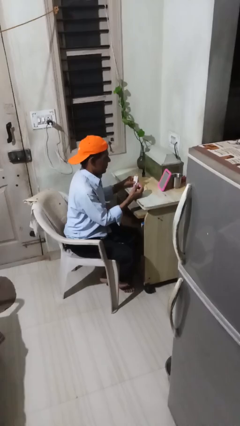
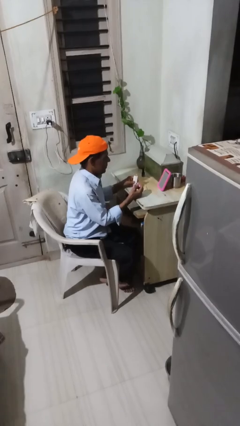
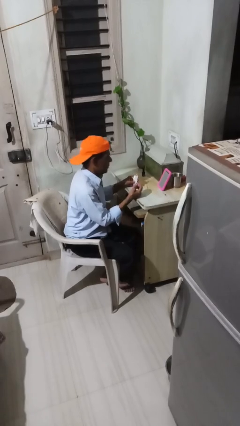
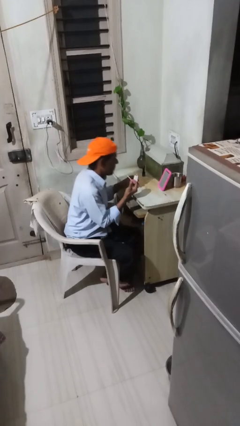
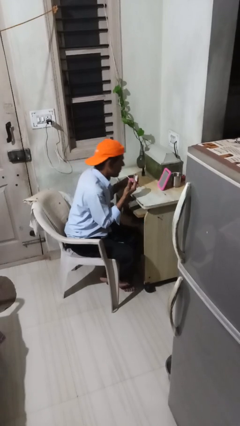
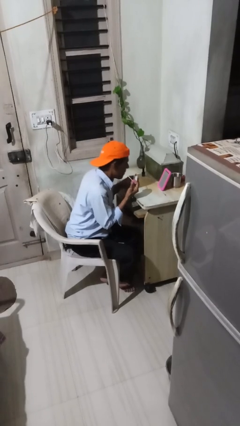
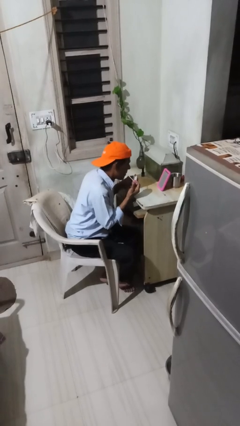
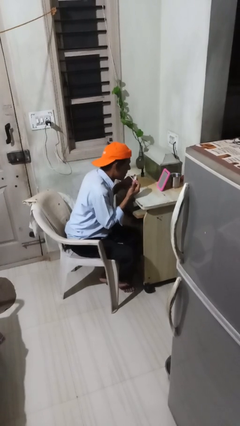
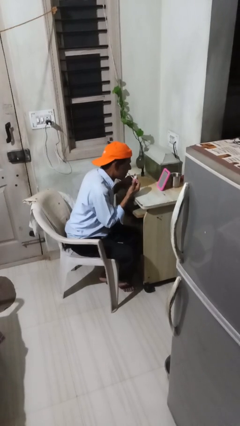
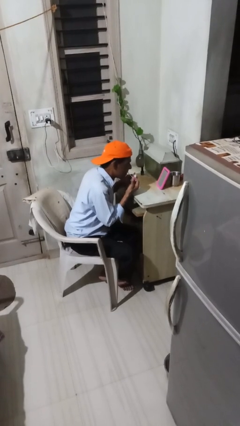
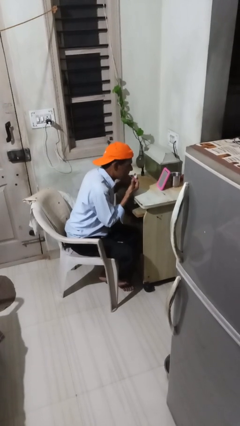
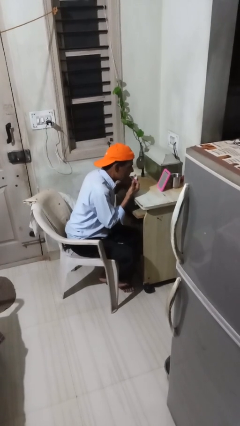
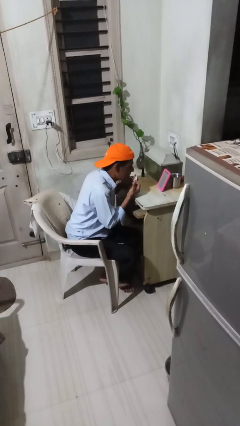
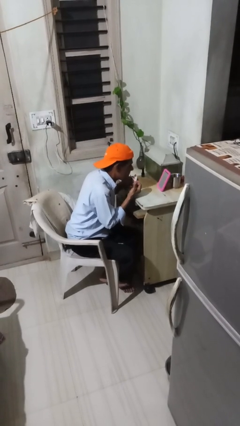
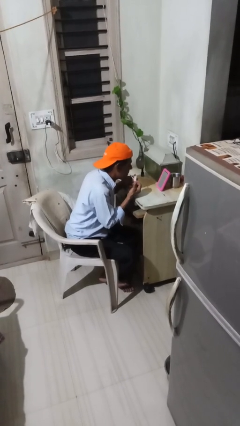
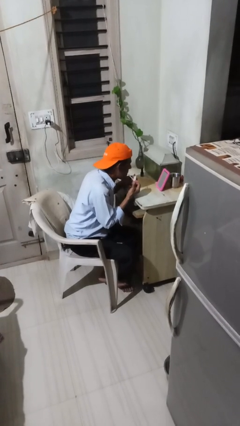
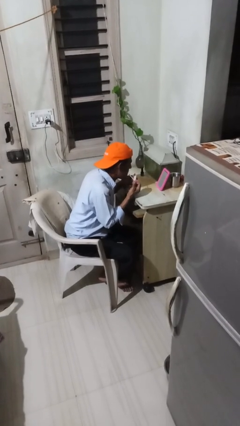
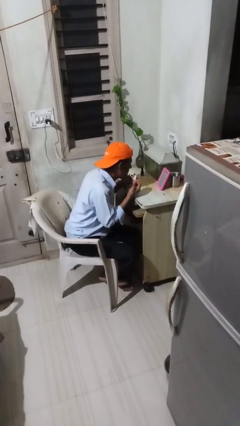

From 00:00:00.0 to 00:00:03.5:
person applies lip makeup

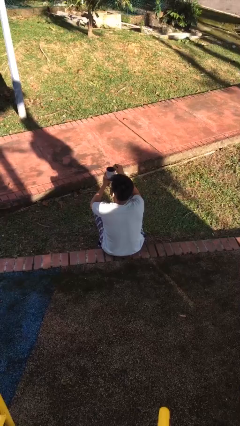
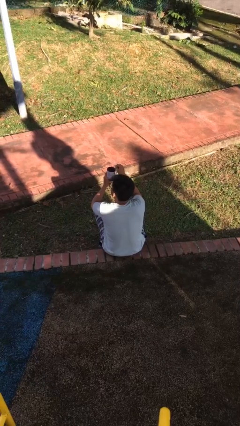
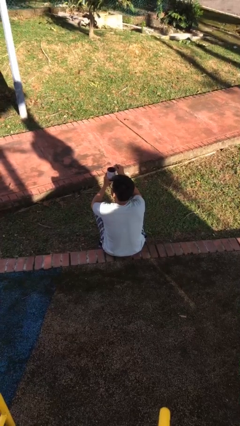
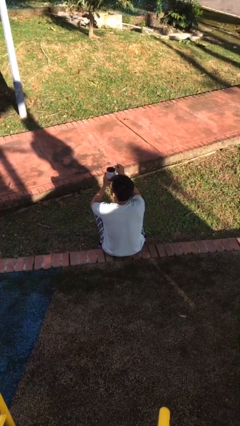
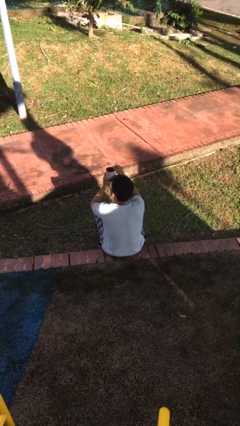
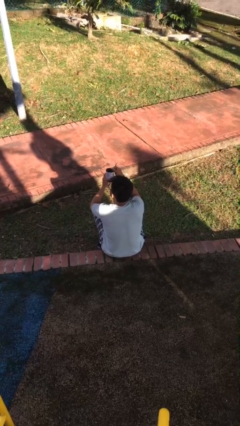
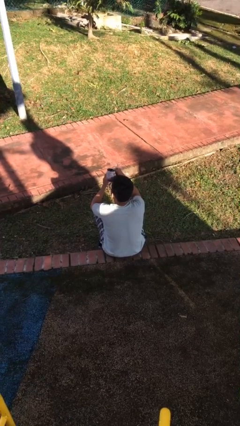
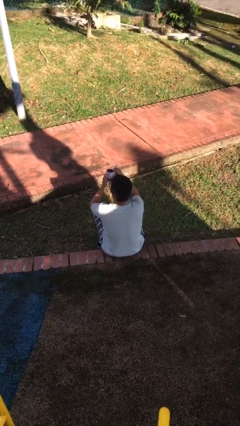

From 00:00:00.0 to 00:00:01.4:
person stirs mug

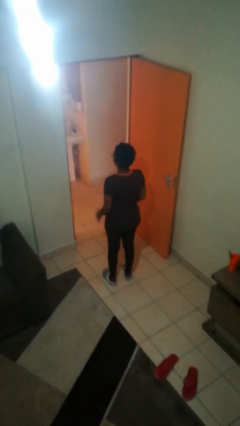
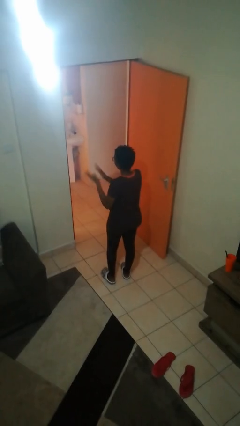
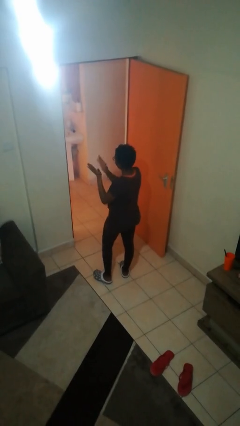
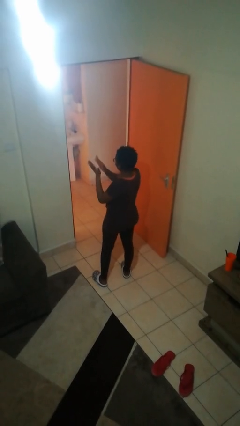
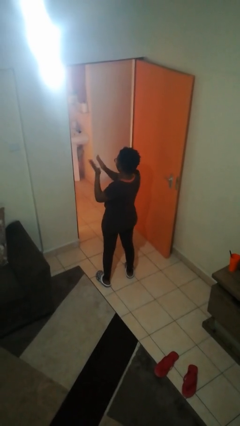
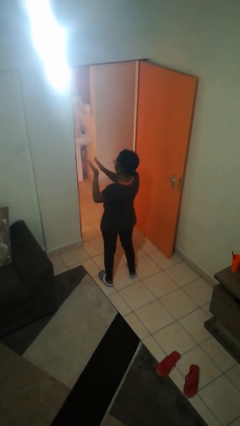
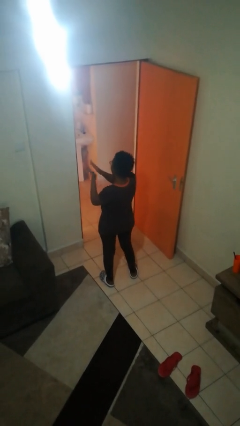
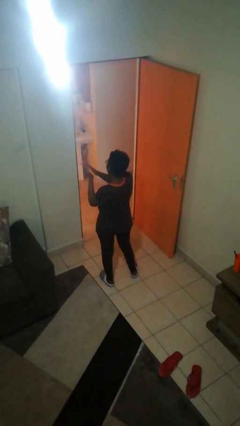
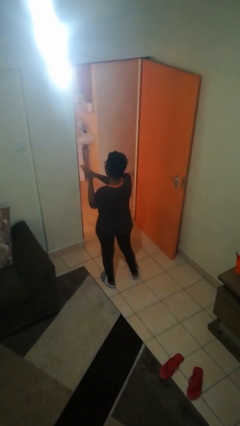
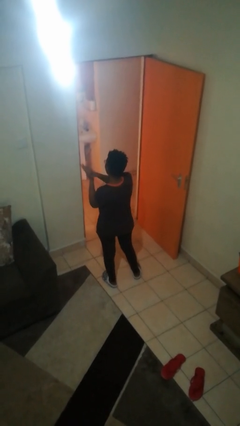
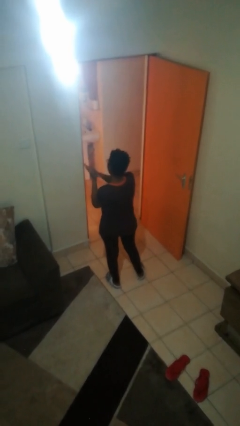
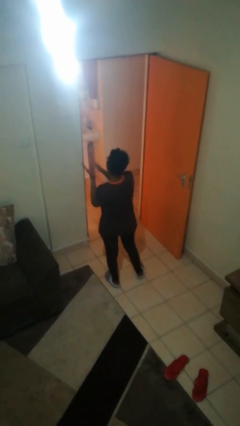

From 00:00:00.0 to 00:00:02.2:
person claps hands

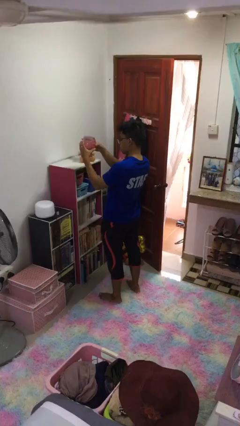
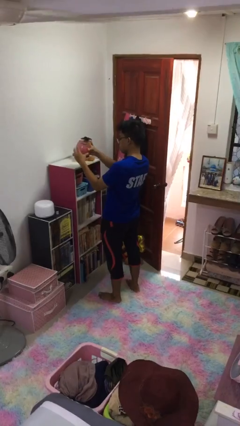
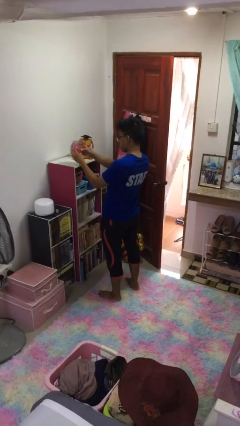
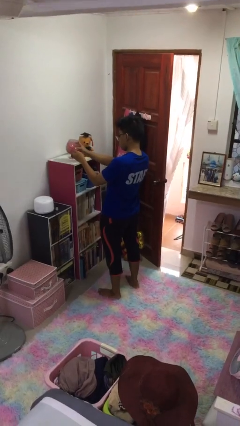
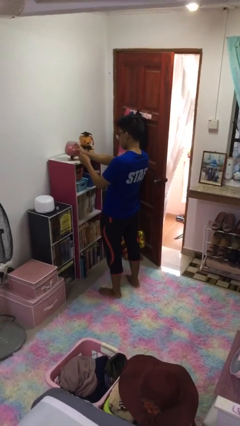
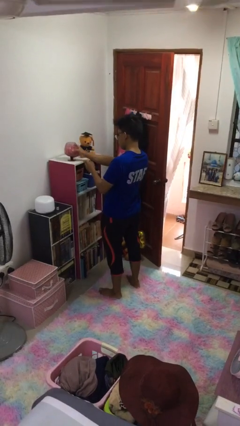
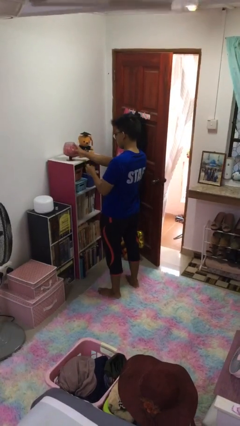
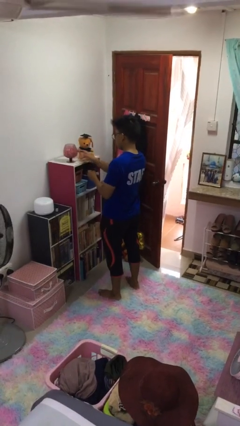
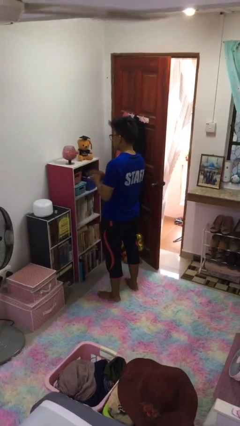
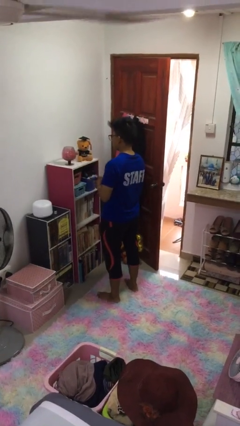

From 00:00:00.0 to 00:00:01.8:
person puts down object on shelf

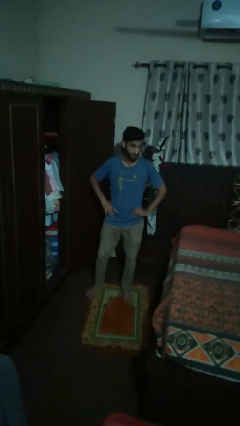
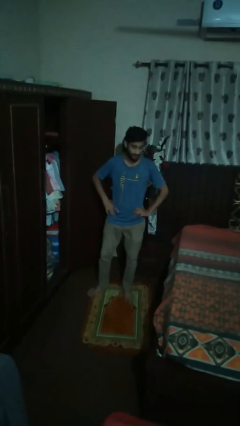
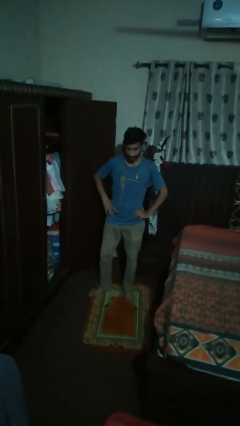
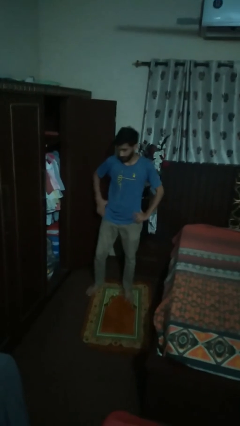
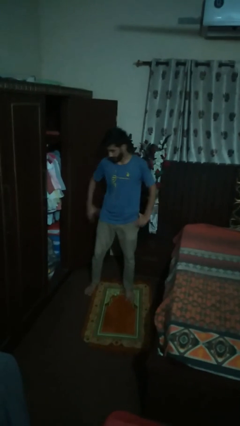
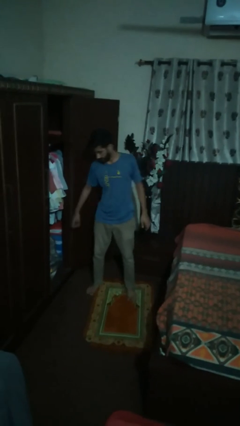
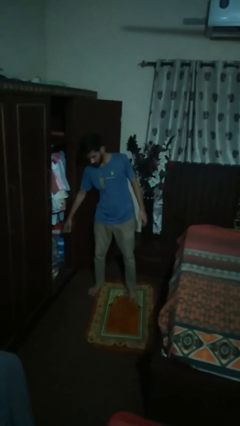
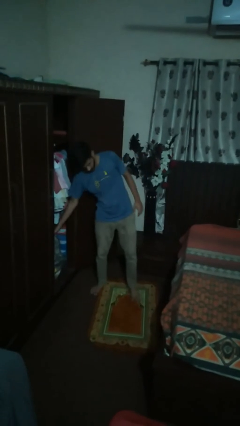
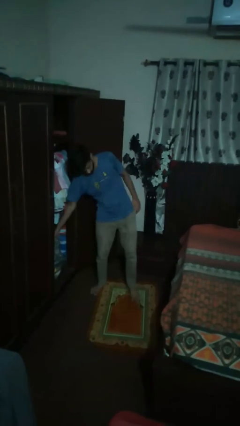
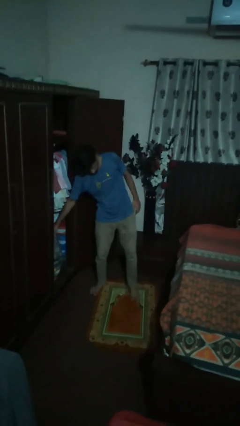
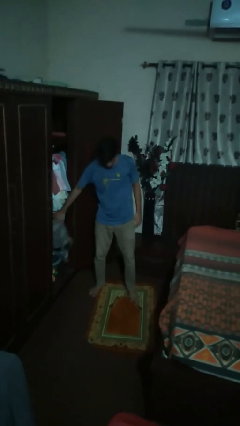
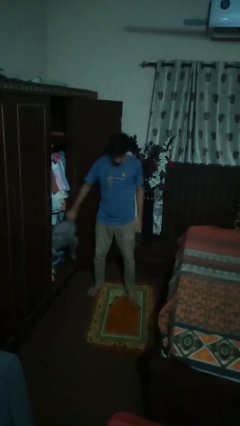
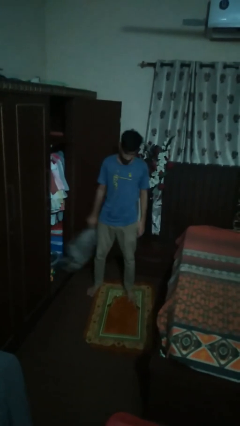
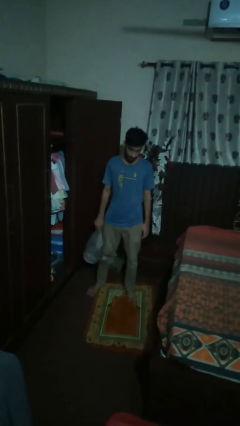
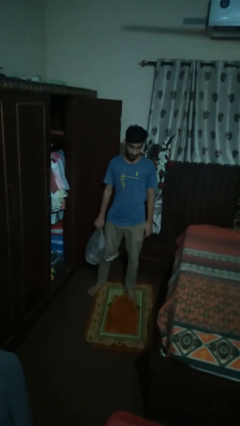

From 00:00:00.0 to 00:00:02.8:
person picks up object from cabinet

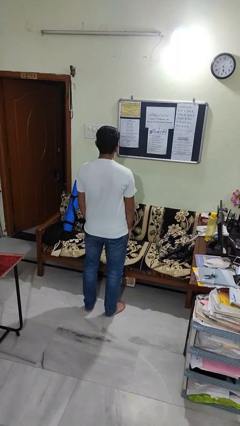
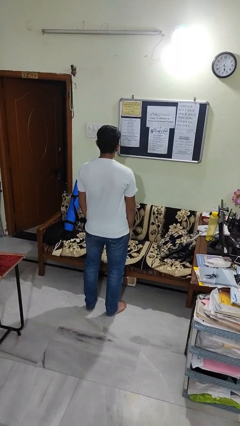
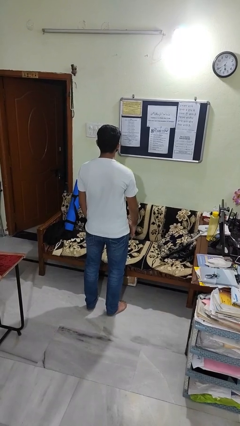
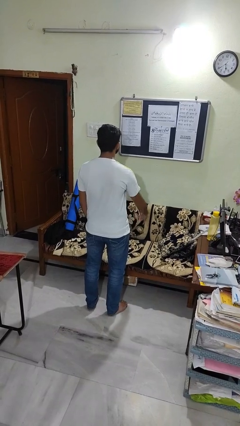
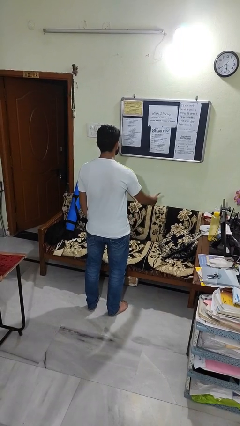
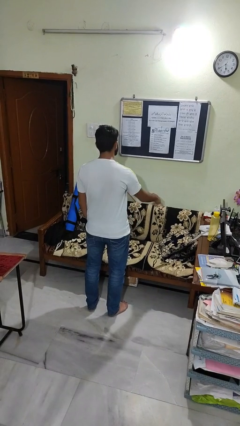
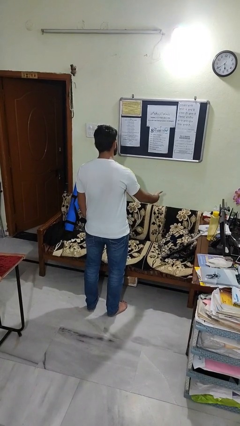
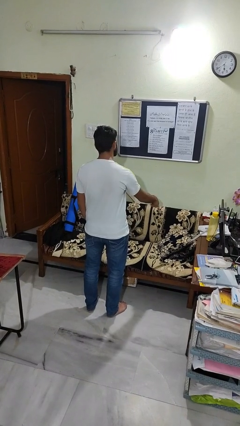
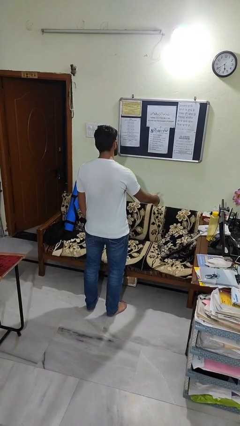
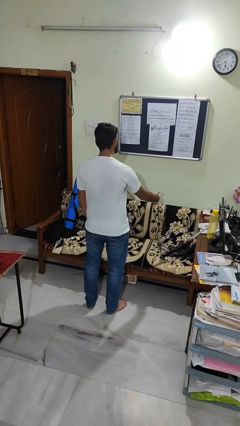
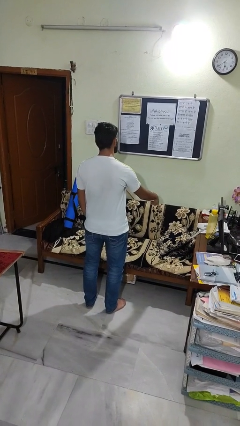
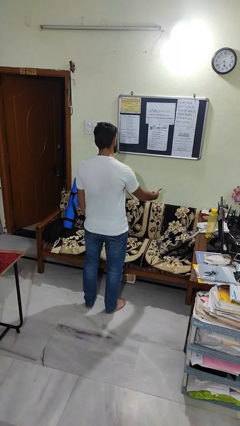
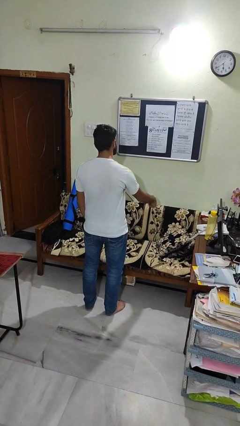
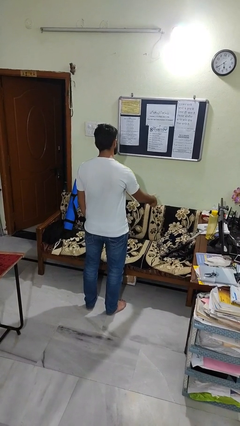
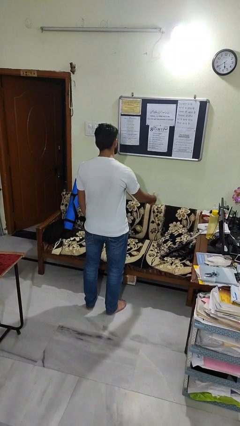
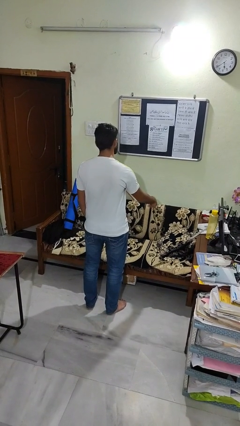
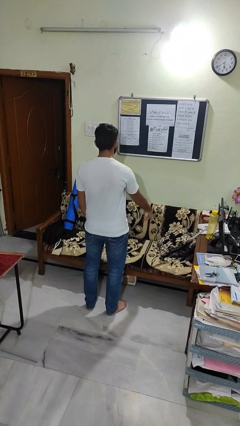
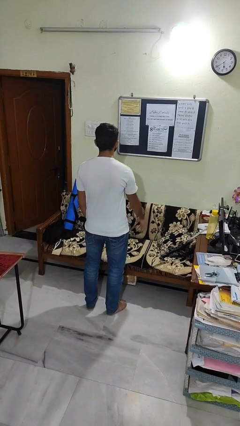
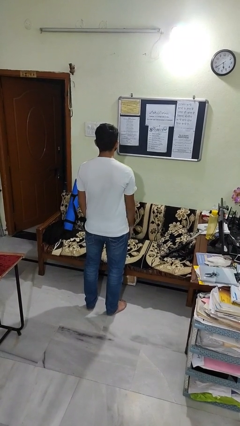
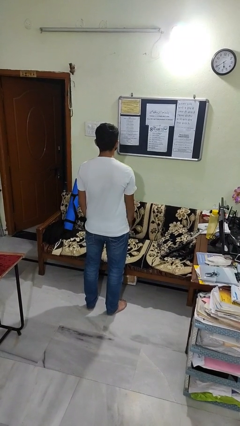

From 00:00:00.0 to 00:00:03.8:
person gestures hang loose

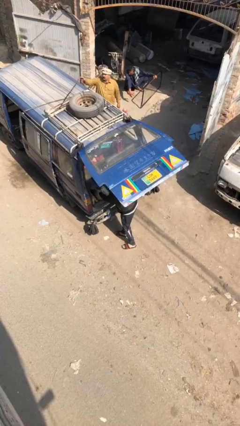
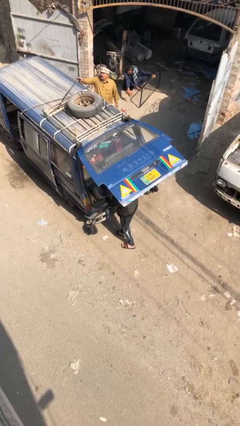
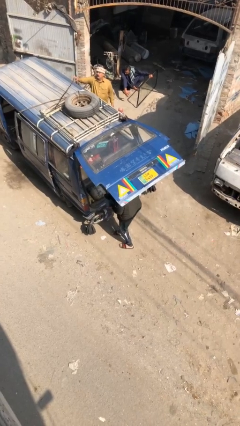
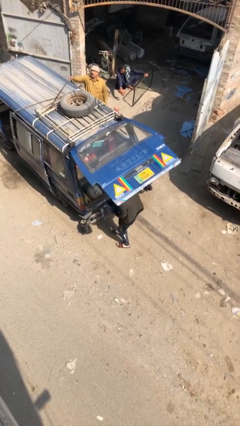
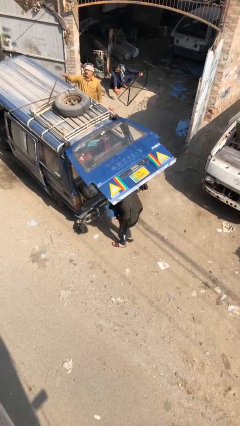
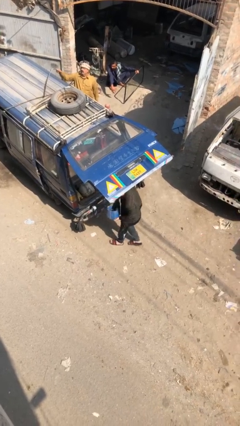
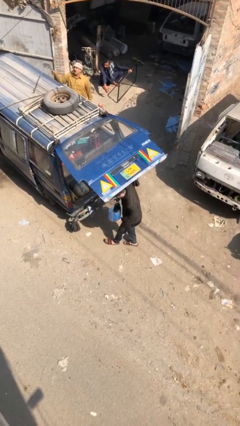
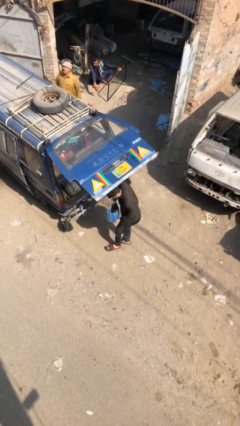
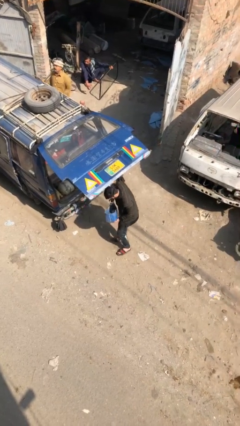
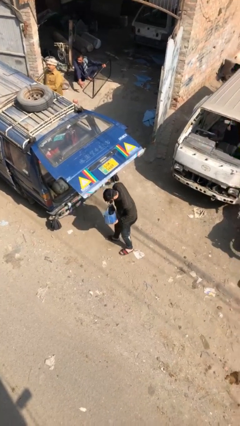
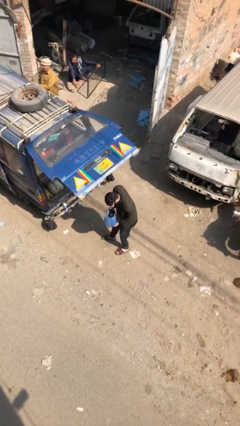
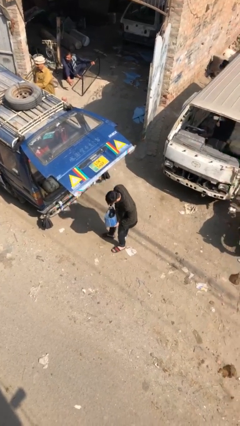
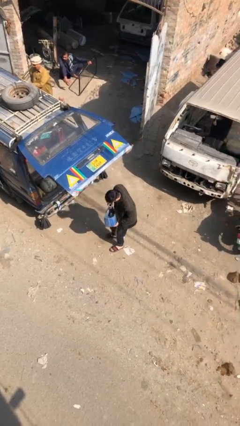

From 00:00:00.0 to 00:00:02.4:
person unloads car
